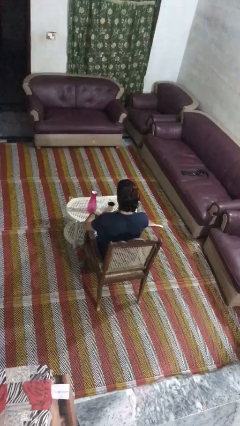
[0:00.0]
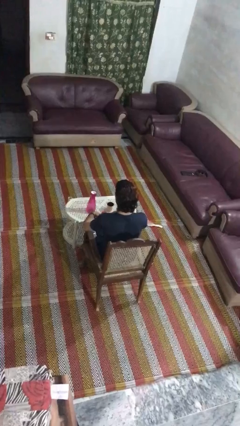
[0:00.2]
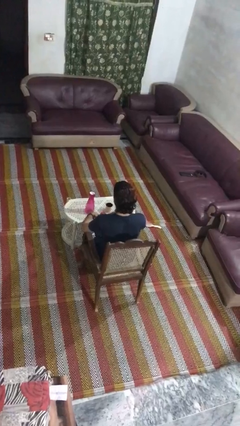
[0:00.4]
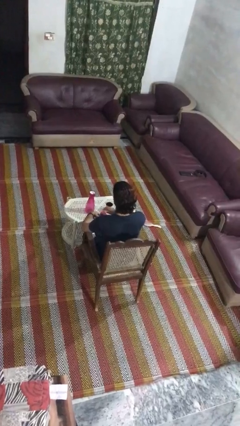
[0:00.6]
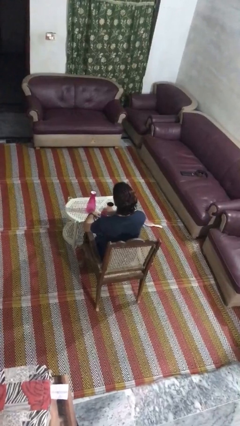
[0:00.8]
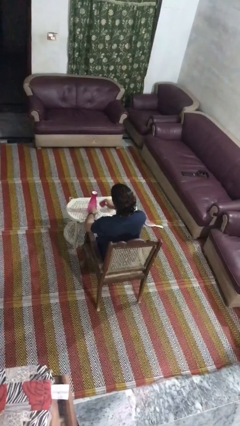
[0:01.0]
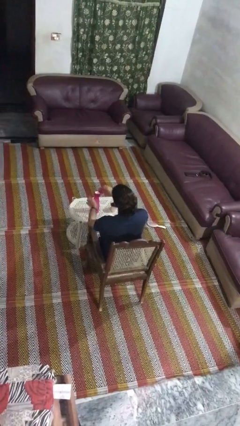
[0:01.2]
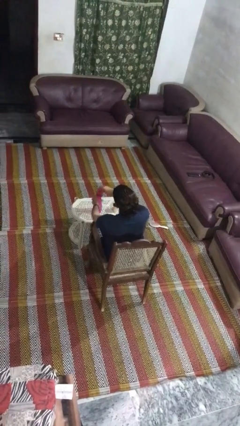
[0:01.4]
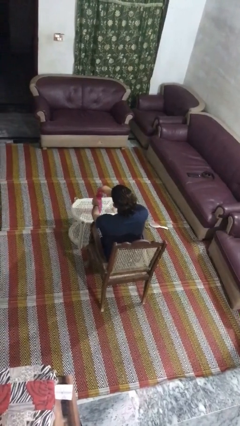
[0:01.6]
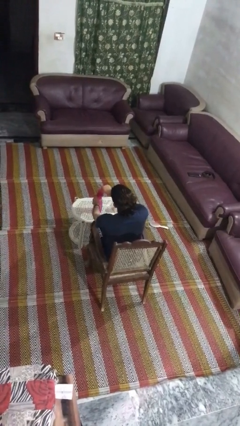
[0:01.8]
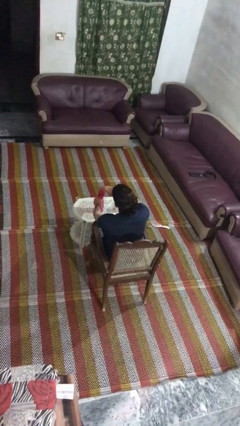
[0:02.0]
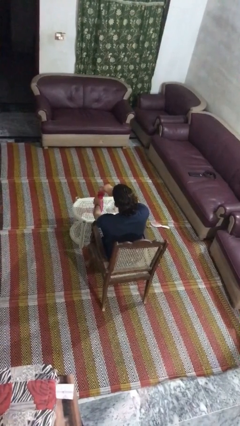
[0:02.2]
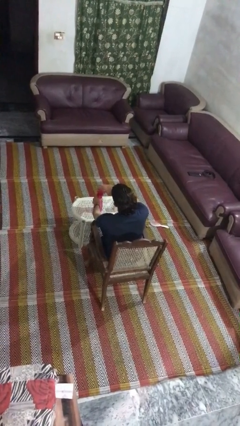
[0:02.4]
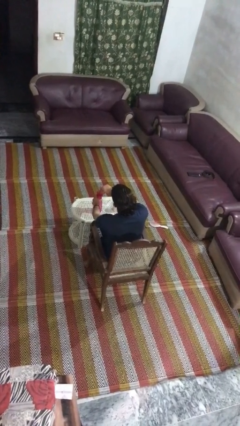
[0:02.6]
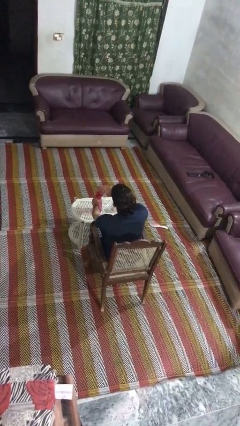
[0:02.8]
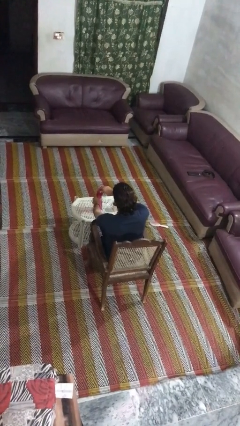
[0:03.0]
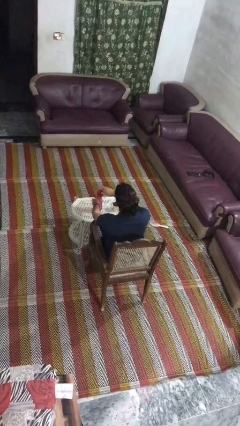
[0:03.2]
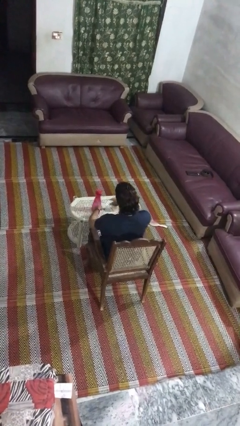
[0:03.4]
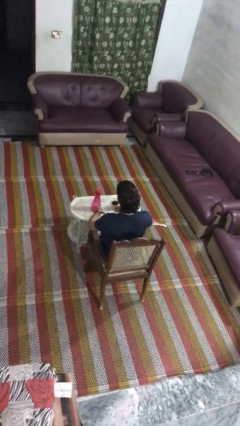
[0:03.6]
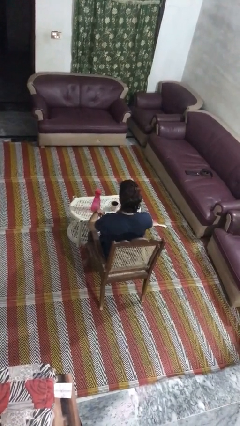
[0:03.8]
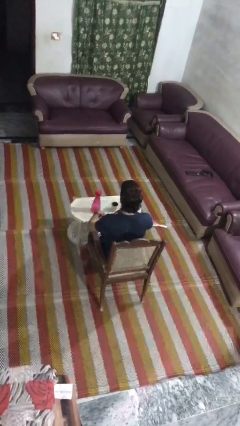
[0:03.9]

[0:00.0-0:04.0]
person screws lid to bottle

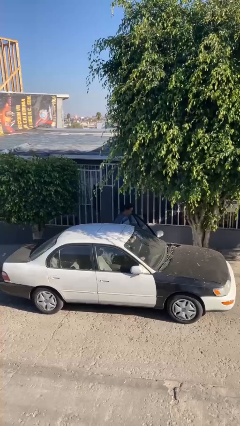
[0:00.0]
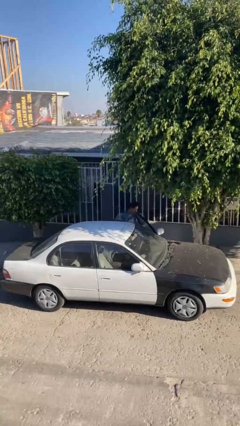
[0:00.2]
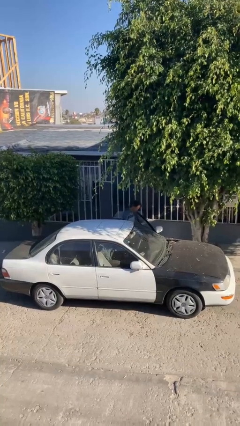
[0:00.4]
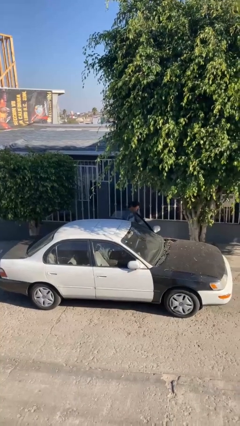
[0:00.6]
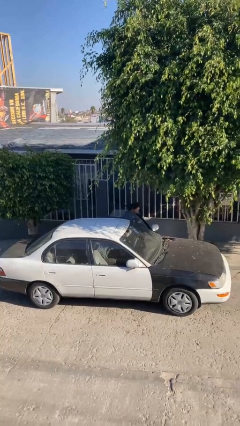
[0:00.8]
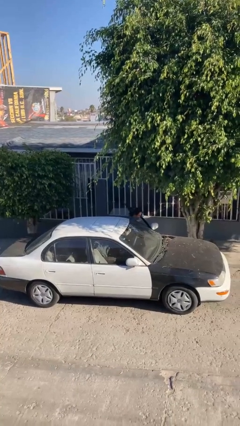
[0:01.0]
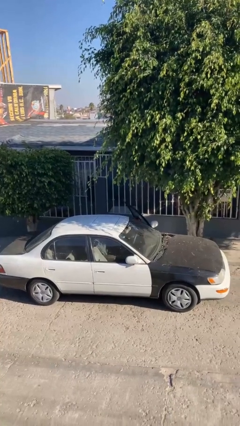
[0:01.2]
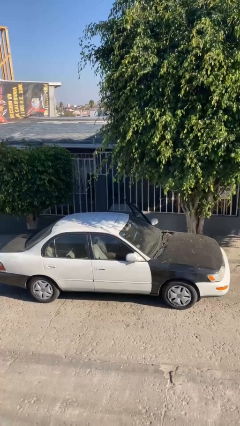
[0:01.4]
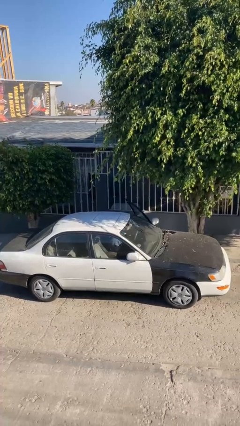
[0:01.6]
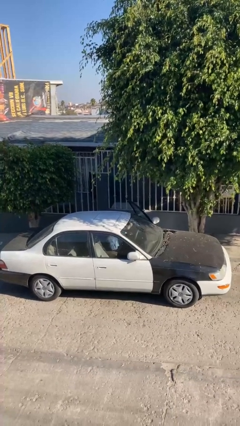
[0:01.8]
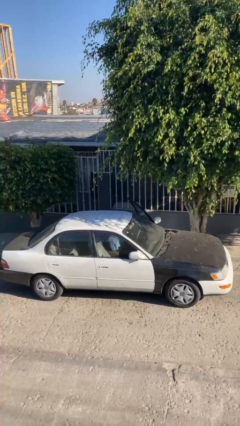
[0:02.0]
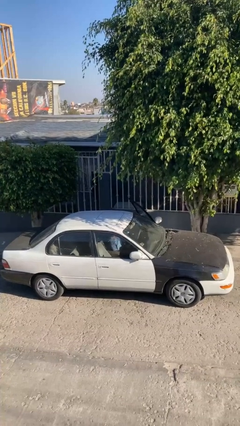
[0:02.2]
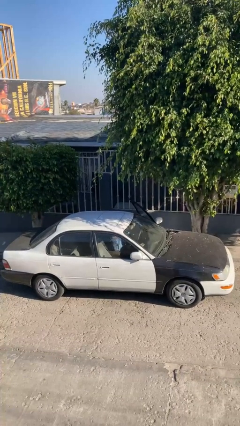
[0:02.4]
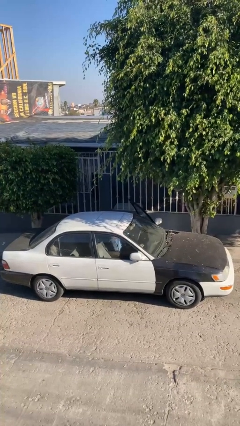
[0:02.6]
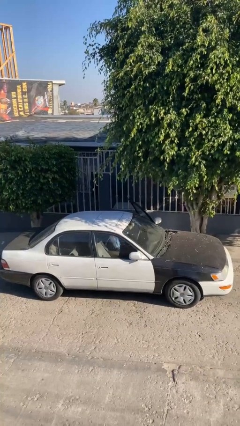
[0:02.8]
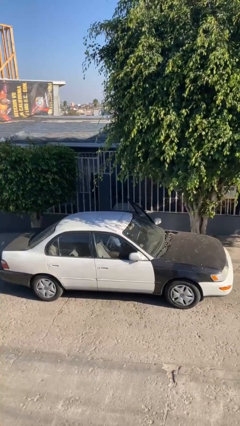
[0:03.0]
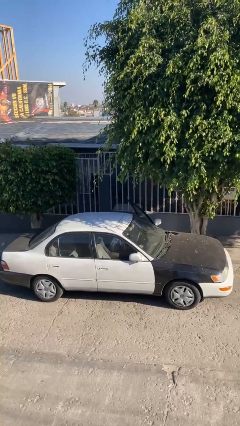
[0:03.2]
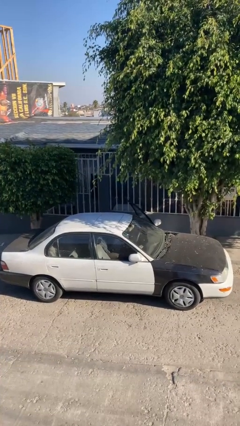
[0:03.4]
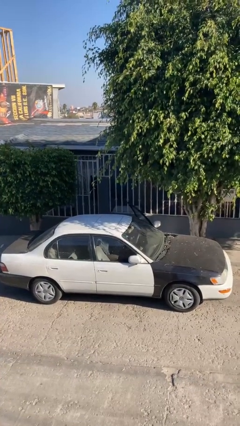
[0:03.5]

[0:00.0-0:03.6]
person enters car

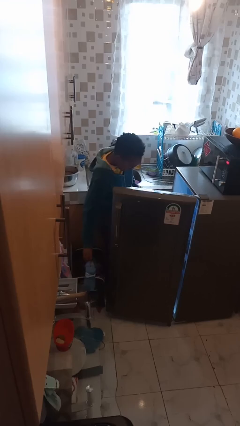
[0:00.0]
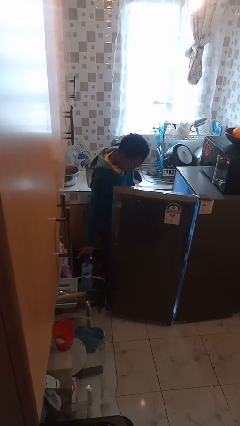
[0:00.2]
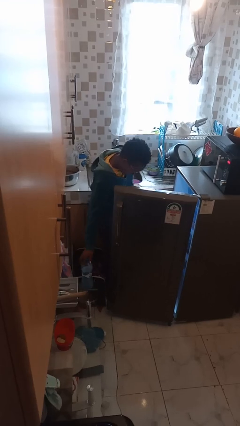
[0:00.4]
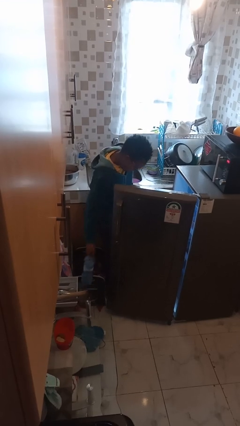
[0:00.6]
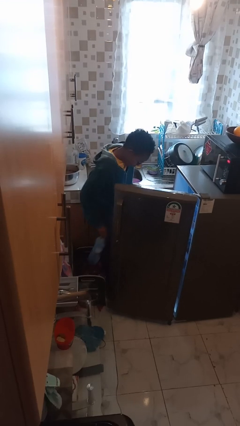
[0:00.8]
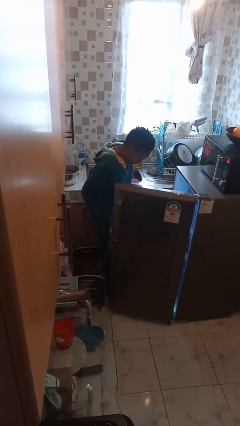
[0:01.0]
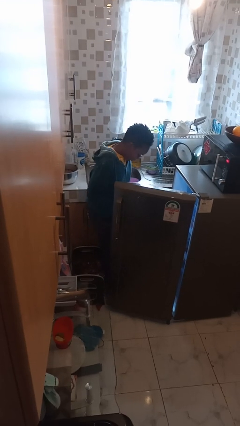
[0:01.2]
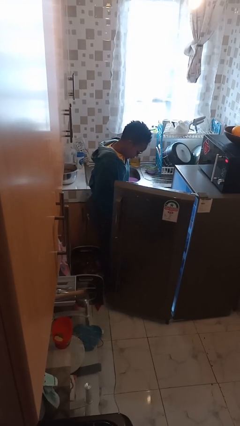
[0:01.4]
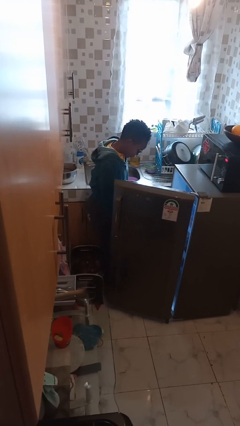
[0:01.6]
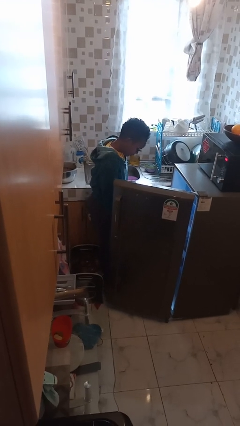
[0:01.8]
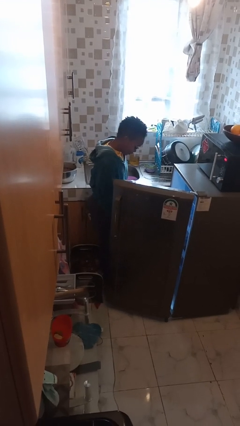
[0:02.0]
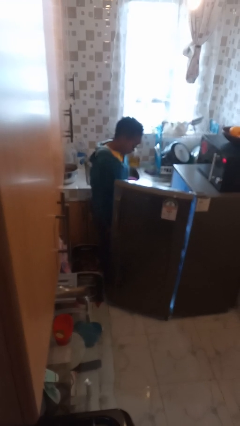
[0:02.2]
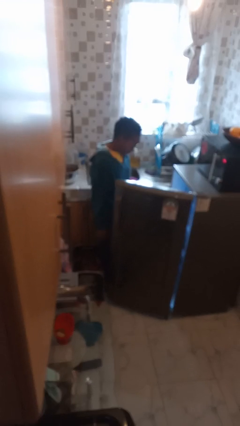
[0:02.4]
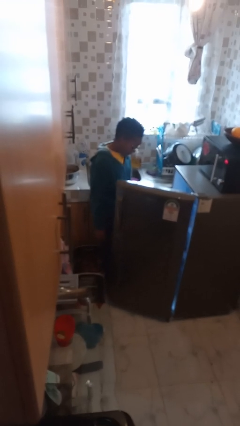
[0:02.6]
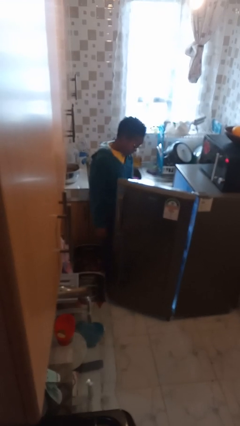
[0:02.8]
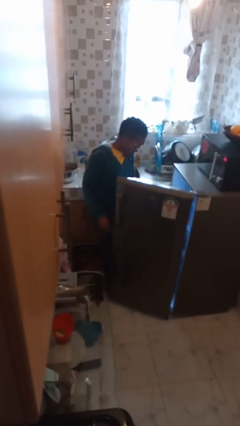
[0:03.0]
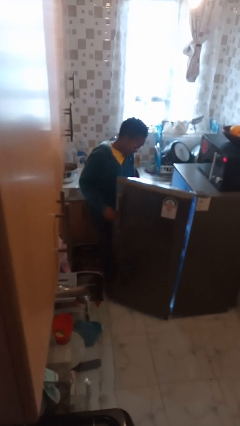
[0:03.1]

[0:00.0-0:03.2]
person puts object into refrigerator

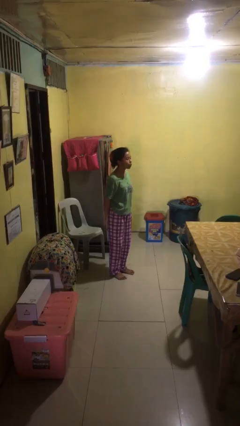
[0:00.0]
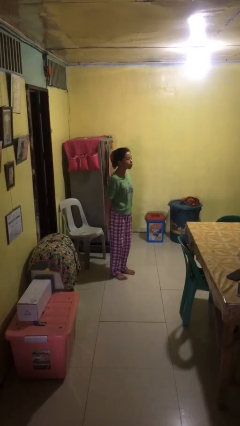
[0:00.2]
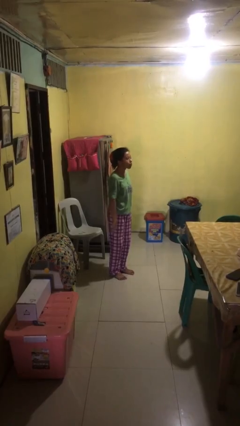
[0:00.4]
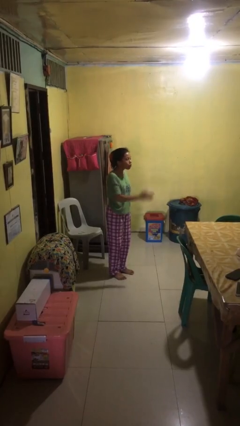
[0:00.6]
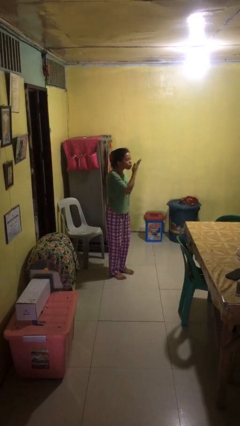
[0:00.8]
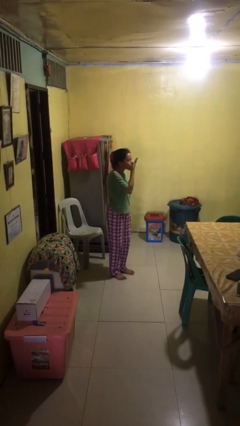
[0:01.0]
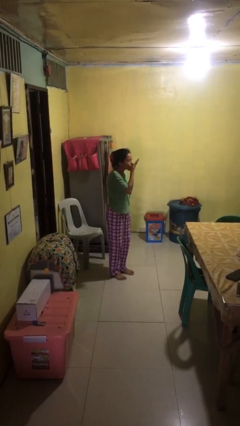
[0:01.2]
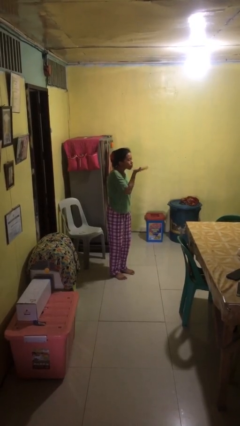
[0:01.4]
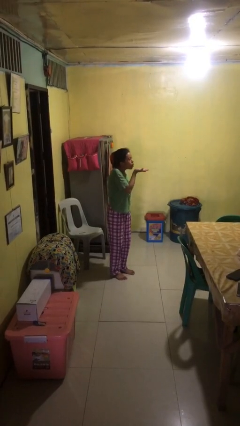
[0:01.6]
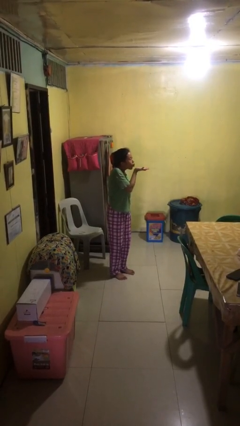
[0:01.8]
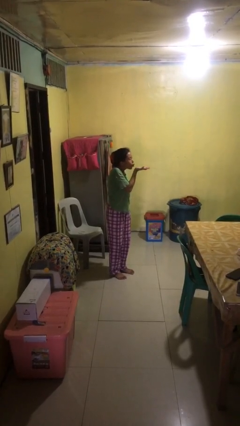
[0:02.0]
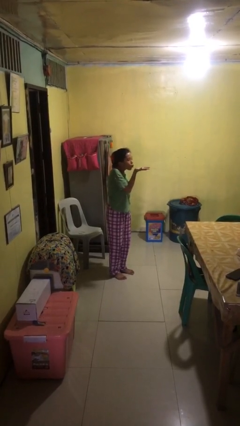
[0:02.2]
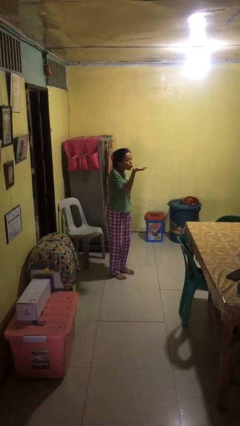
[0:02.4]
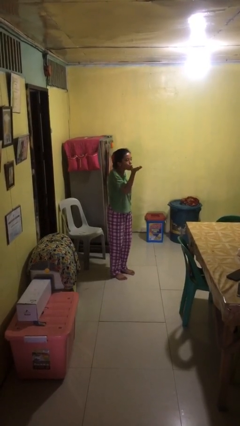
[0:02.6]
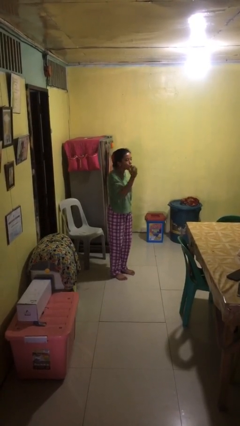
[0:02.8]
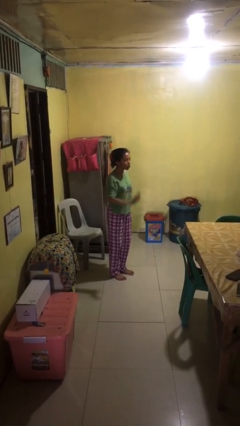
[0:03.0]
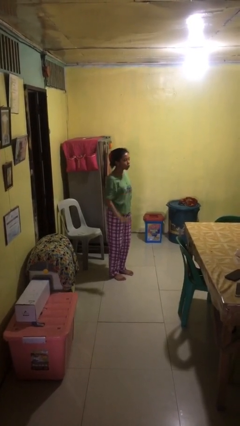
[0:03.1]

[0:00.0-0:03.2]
person gestures blow kiss

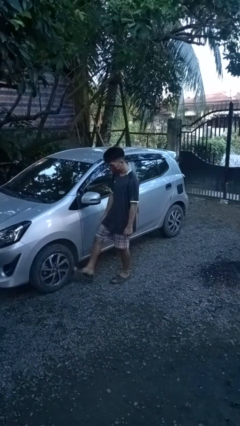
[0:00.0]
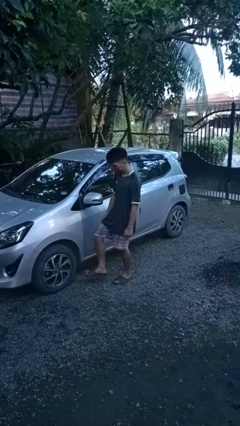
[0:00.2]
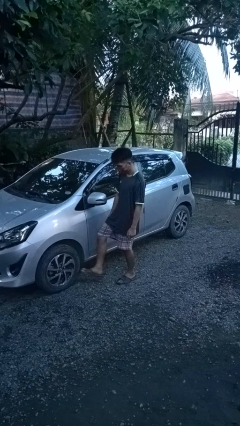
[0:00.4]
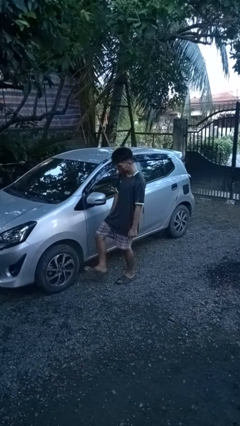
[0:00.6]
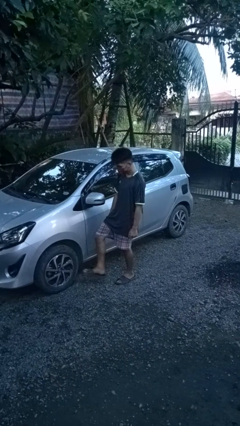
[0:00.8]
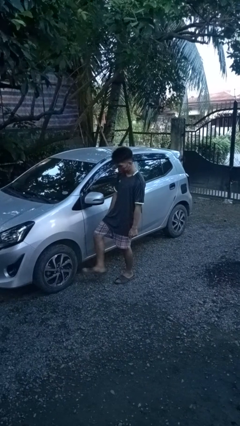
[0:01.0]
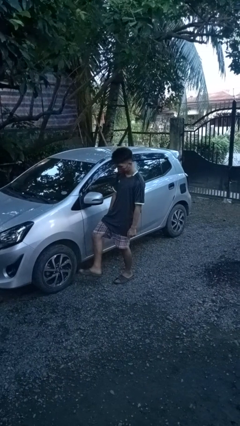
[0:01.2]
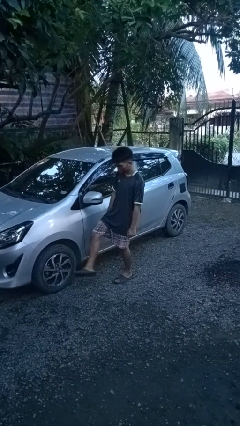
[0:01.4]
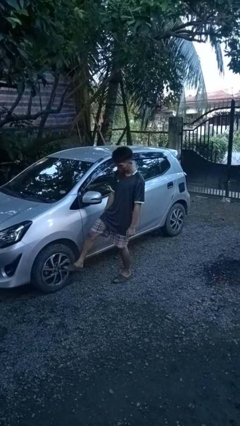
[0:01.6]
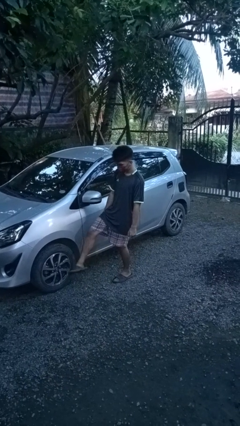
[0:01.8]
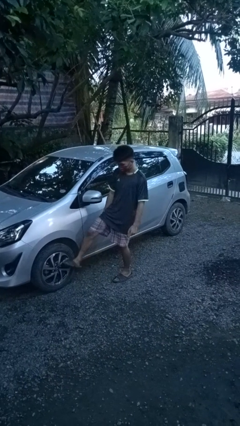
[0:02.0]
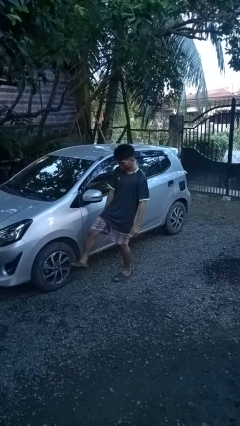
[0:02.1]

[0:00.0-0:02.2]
person kicks car tires

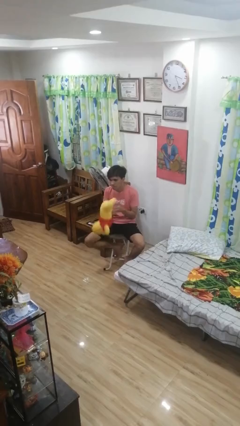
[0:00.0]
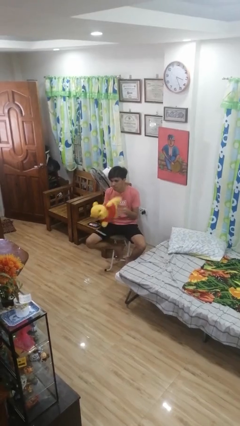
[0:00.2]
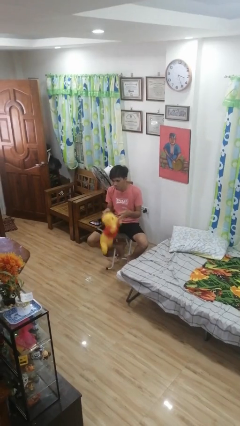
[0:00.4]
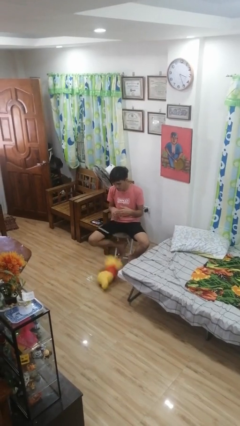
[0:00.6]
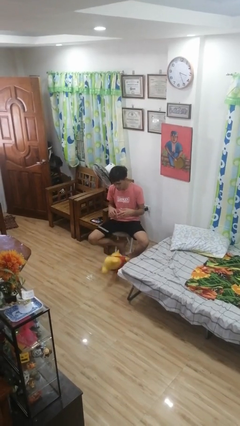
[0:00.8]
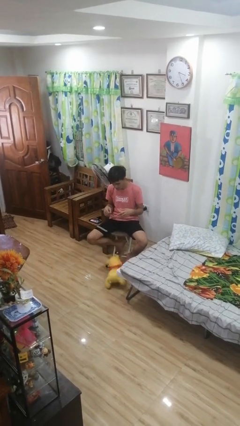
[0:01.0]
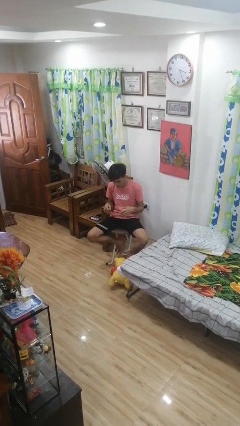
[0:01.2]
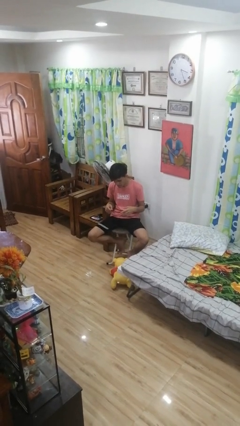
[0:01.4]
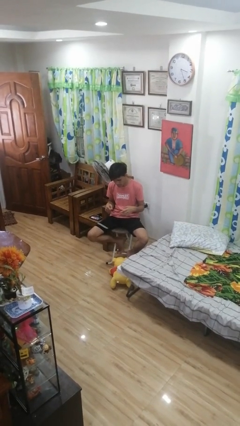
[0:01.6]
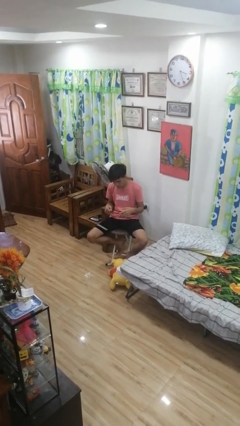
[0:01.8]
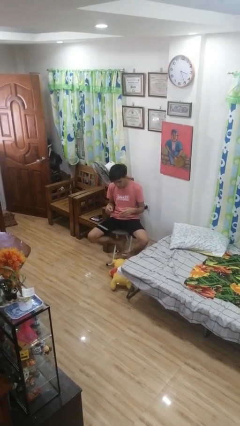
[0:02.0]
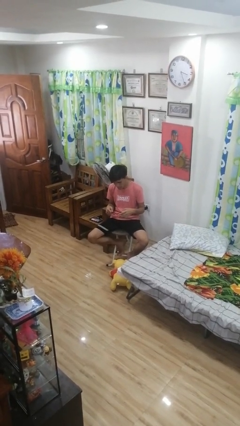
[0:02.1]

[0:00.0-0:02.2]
person drops object
